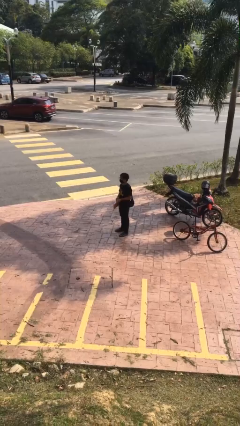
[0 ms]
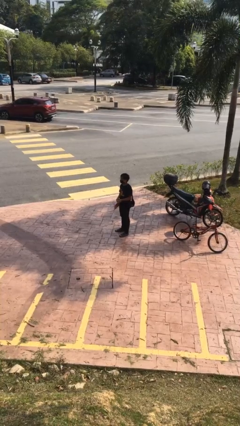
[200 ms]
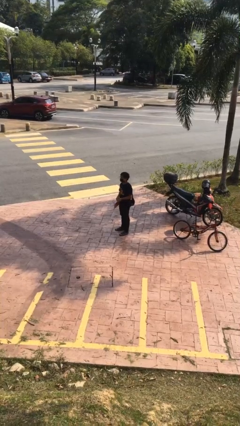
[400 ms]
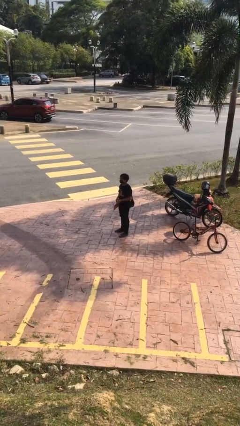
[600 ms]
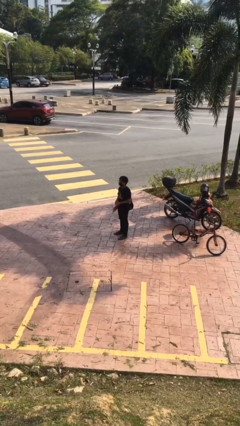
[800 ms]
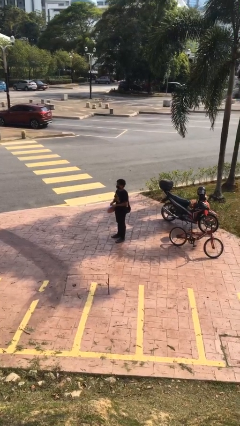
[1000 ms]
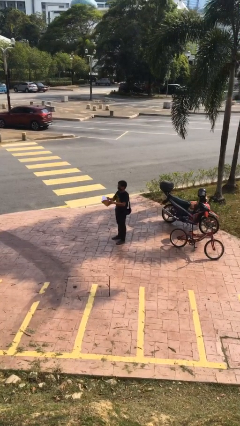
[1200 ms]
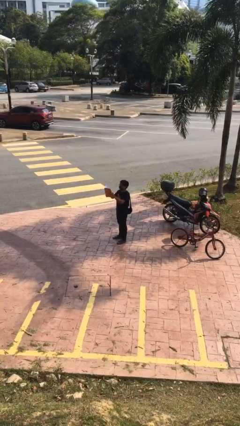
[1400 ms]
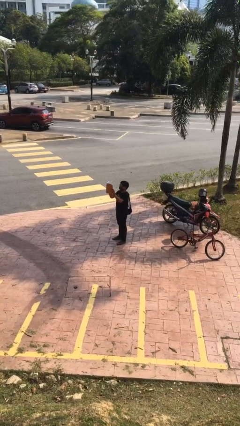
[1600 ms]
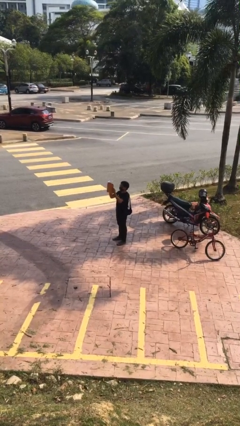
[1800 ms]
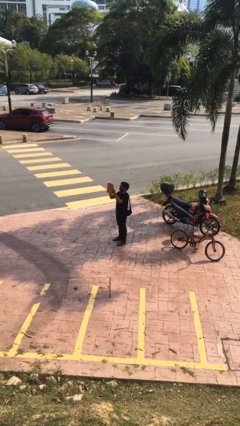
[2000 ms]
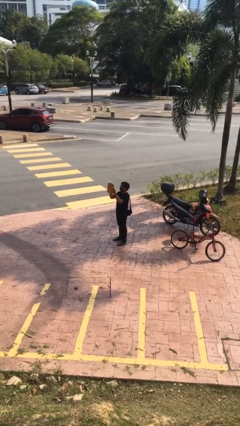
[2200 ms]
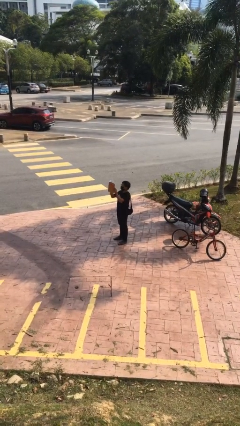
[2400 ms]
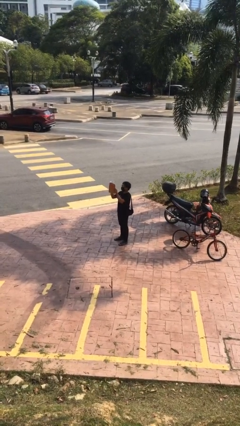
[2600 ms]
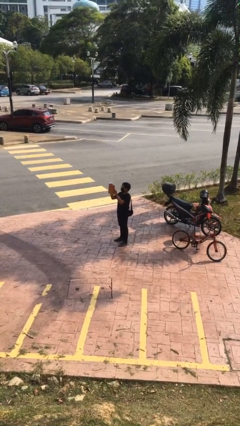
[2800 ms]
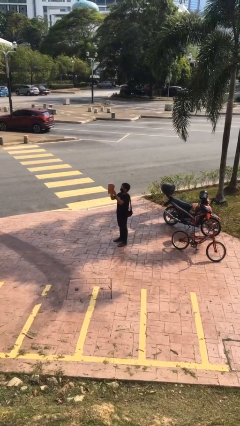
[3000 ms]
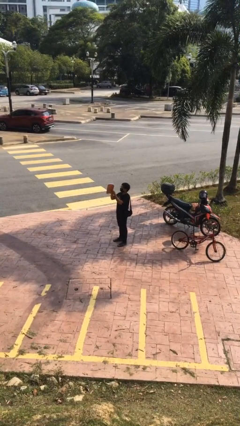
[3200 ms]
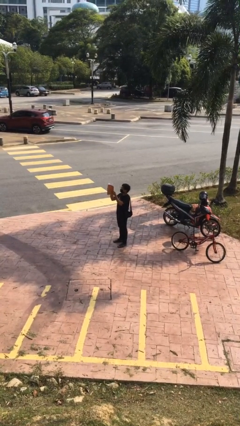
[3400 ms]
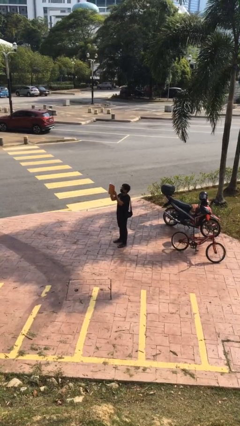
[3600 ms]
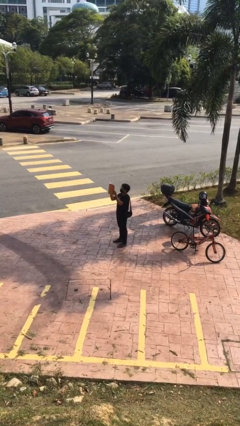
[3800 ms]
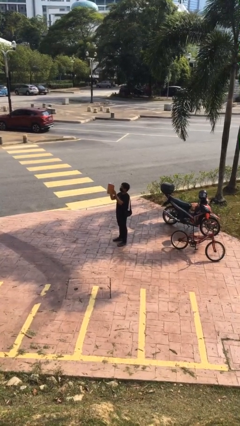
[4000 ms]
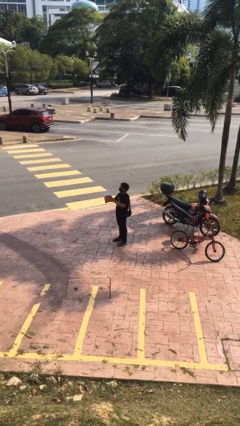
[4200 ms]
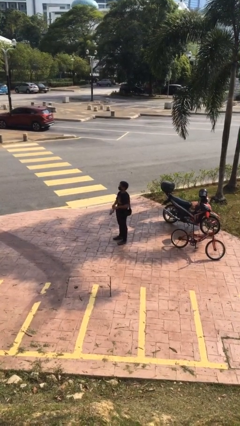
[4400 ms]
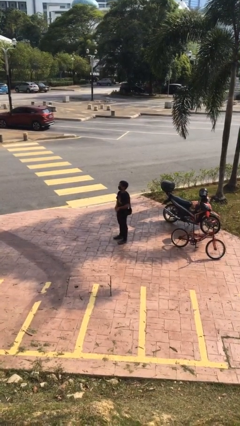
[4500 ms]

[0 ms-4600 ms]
person reads document

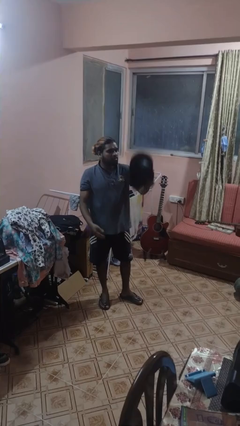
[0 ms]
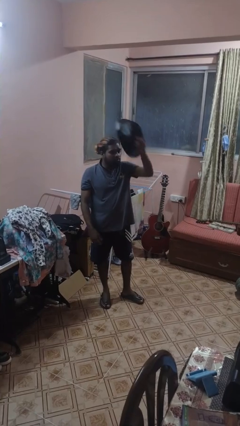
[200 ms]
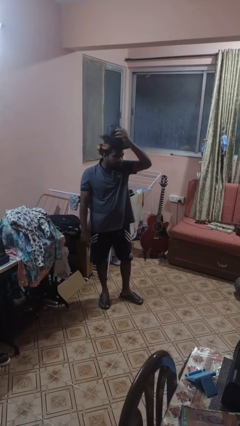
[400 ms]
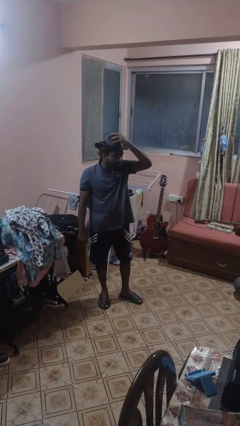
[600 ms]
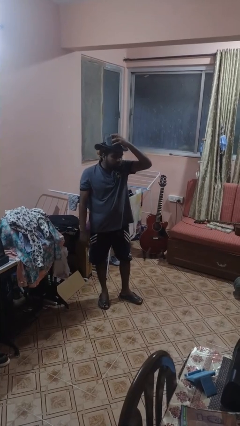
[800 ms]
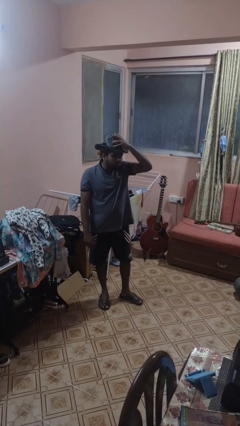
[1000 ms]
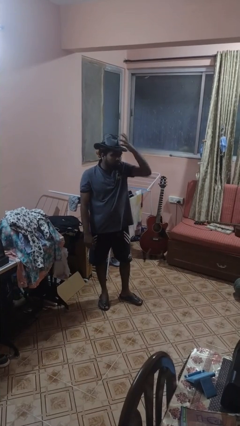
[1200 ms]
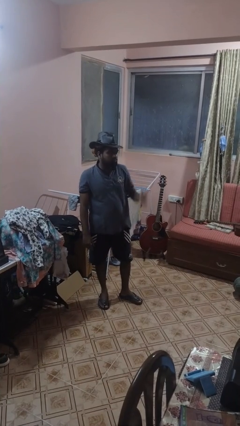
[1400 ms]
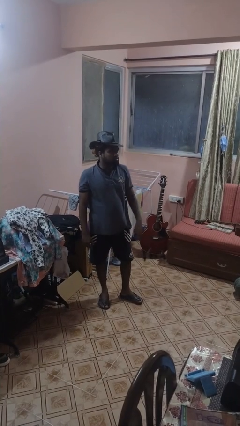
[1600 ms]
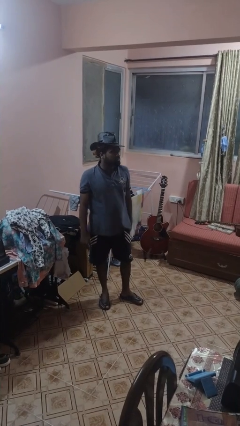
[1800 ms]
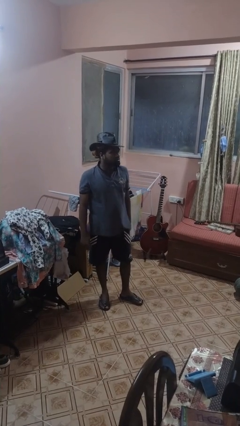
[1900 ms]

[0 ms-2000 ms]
person puts on hat

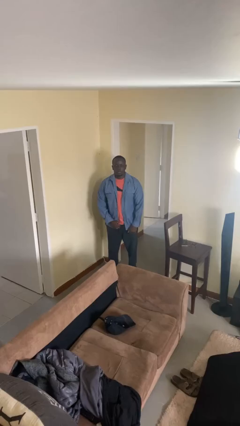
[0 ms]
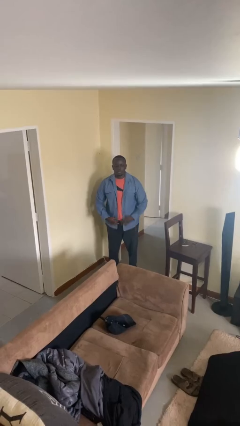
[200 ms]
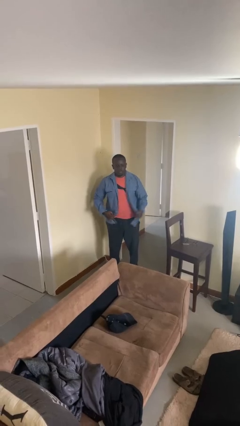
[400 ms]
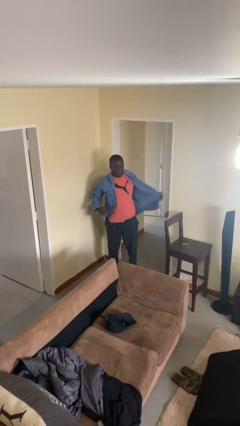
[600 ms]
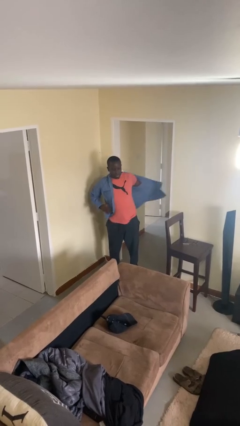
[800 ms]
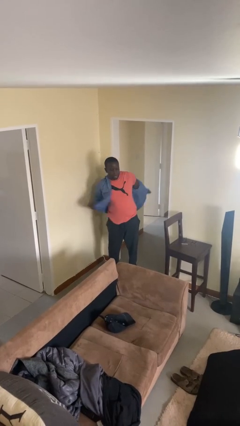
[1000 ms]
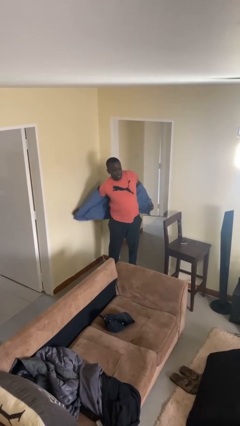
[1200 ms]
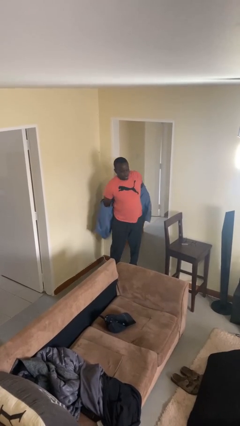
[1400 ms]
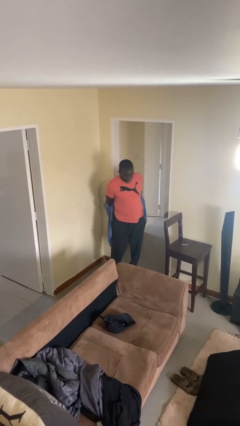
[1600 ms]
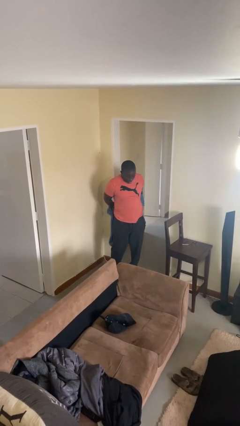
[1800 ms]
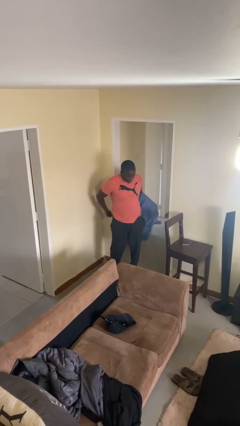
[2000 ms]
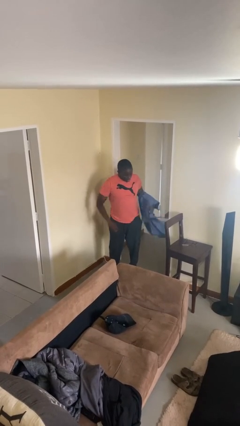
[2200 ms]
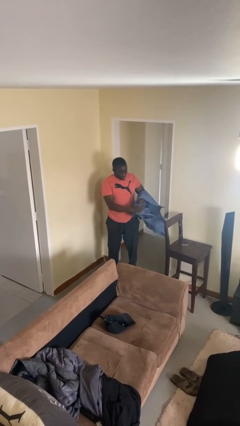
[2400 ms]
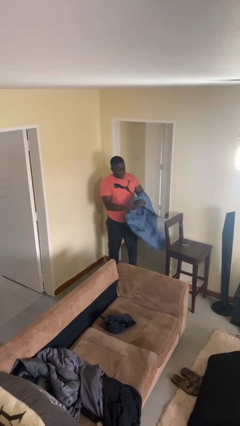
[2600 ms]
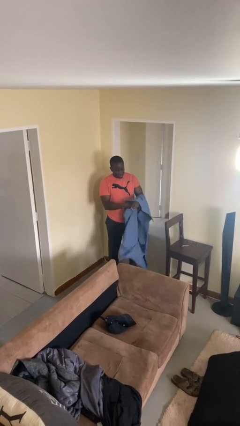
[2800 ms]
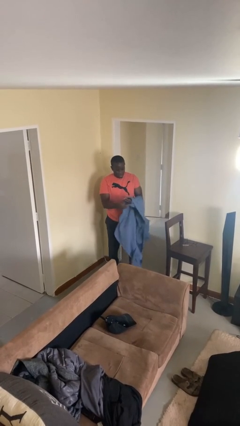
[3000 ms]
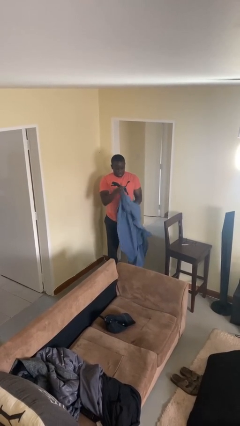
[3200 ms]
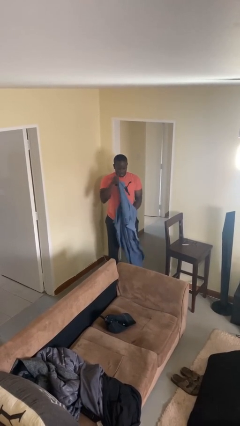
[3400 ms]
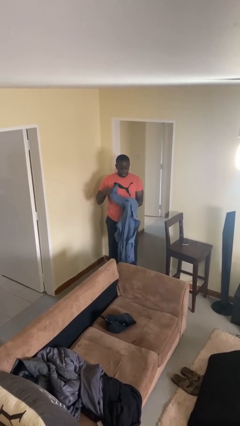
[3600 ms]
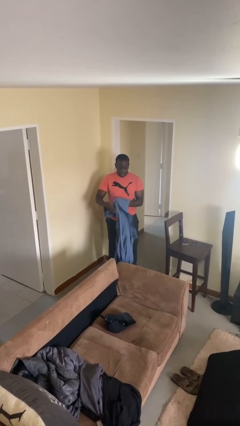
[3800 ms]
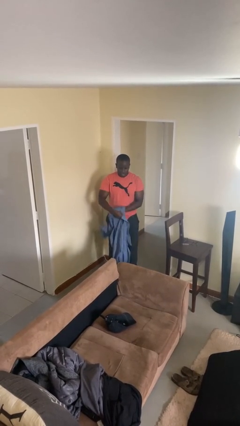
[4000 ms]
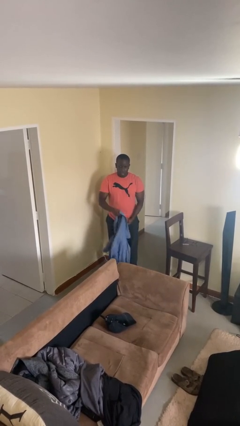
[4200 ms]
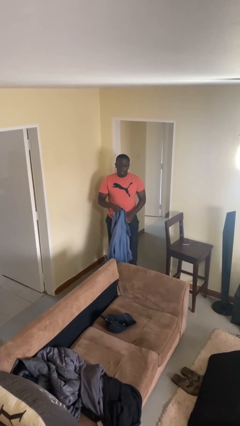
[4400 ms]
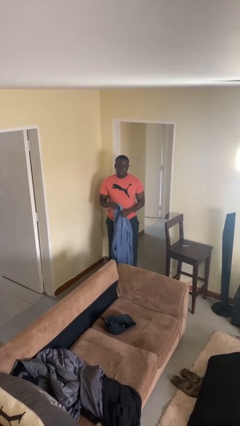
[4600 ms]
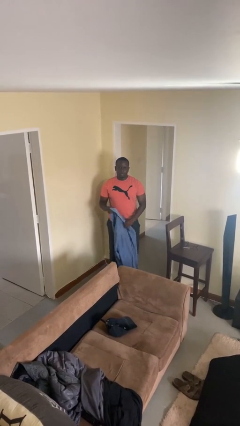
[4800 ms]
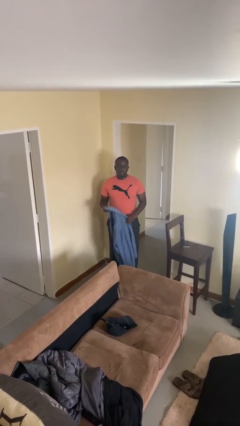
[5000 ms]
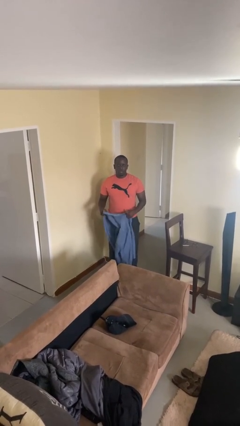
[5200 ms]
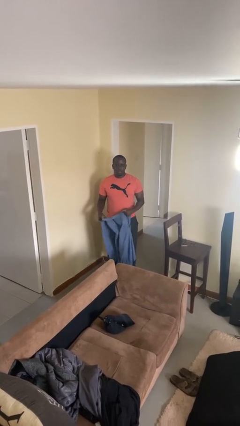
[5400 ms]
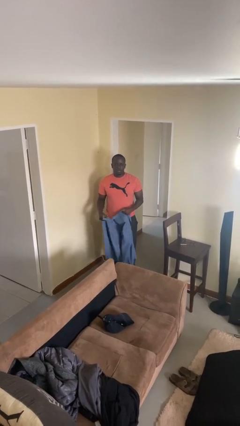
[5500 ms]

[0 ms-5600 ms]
person takes off shirt

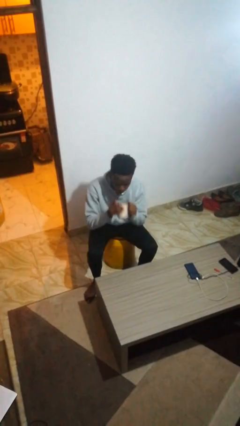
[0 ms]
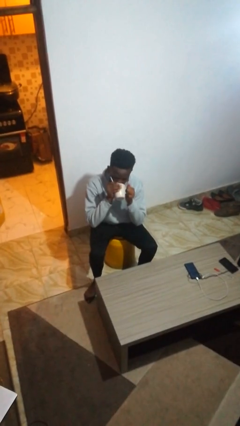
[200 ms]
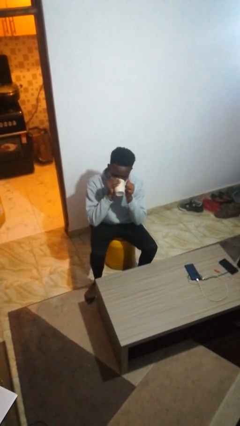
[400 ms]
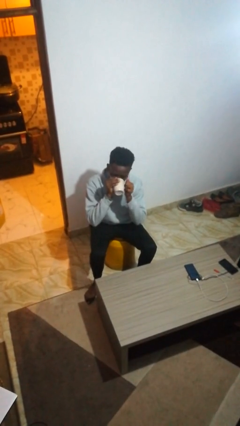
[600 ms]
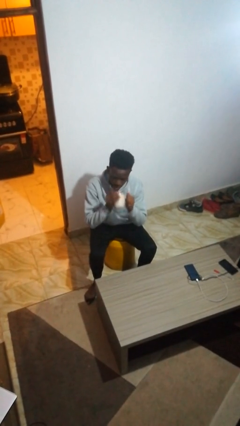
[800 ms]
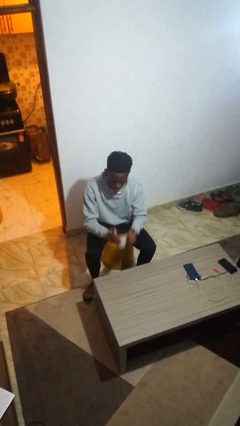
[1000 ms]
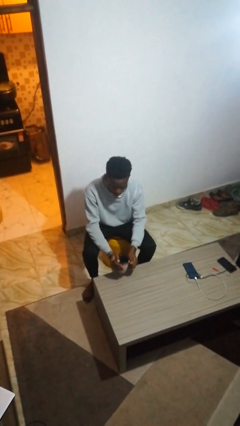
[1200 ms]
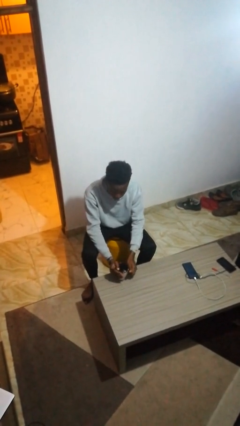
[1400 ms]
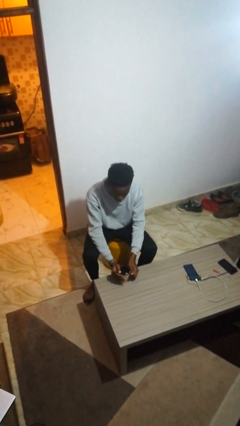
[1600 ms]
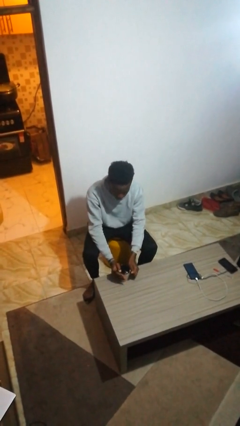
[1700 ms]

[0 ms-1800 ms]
person drinks from mug

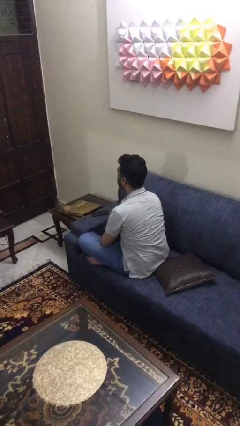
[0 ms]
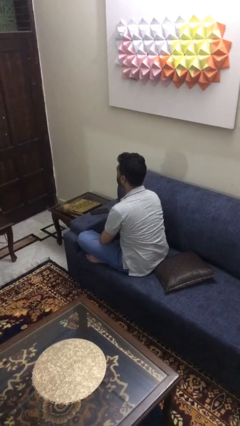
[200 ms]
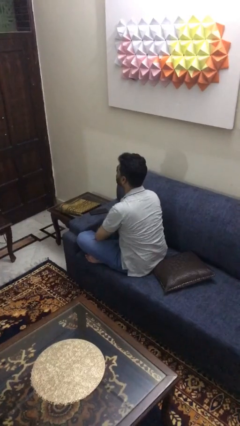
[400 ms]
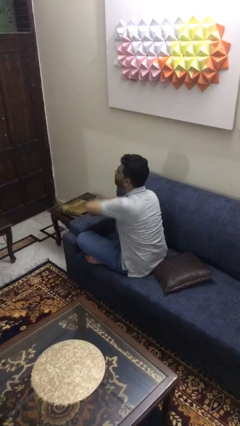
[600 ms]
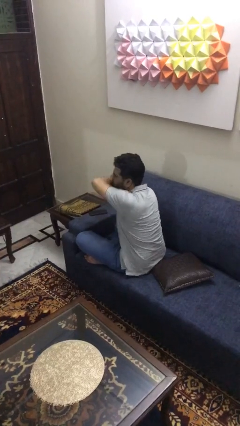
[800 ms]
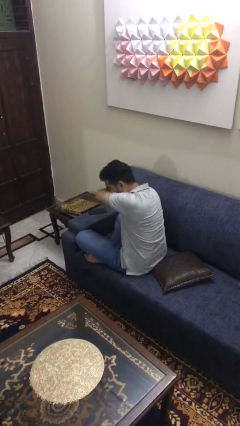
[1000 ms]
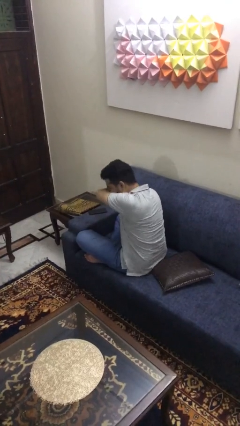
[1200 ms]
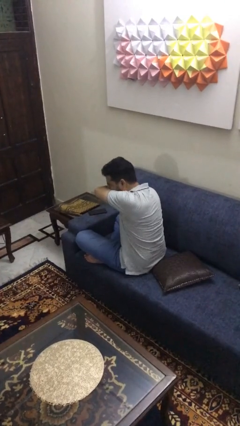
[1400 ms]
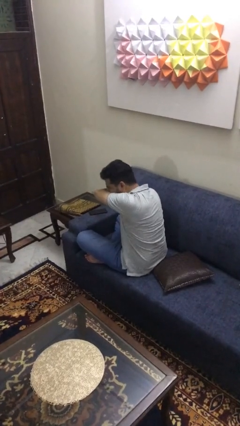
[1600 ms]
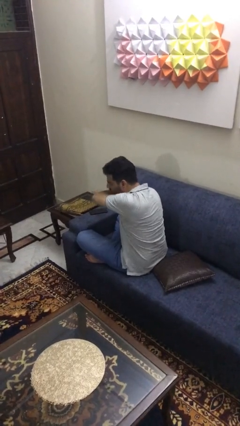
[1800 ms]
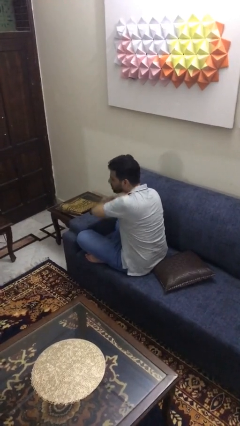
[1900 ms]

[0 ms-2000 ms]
person sneezes into arm

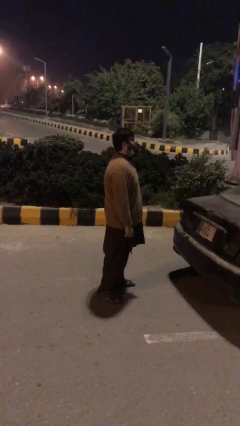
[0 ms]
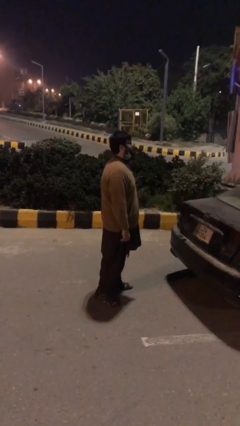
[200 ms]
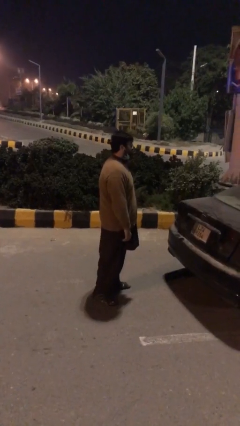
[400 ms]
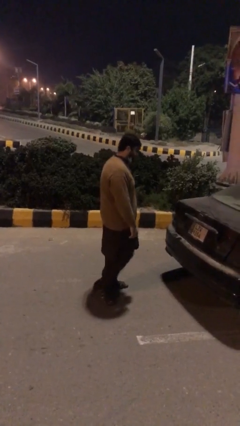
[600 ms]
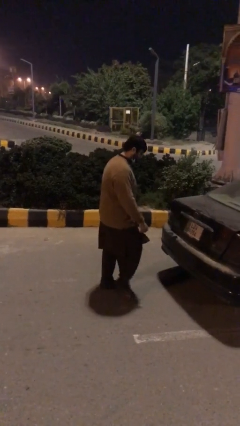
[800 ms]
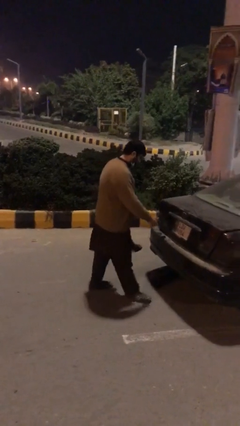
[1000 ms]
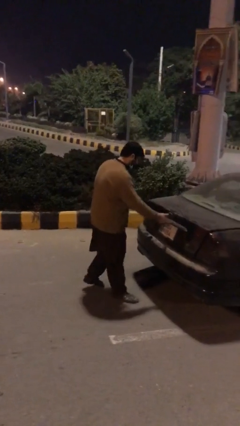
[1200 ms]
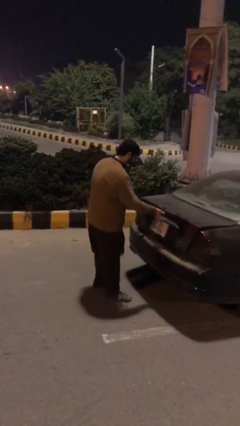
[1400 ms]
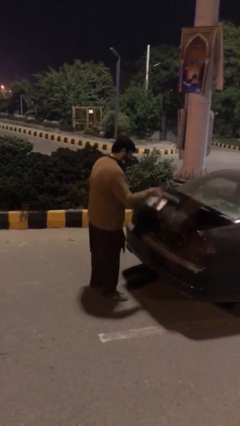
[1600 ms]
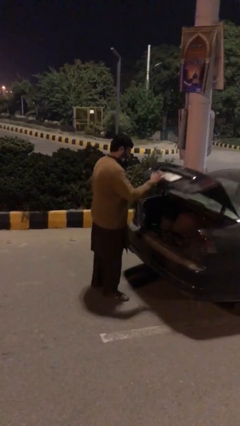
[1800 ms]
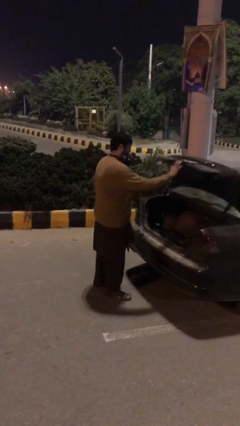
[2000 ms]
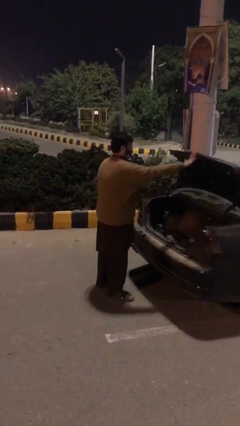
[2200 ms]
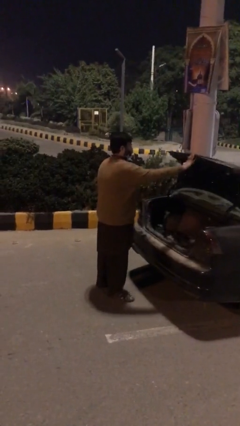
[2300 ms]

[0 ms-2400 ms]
person opens car trunk
